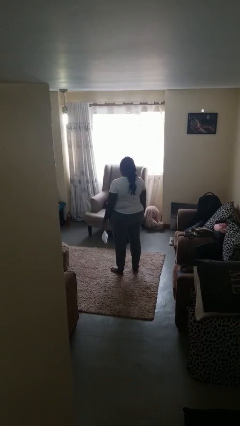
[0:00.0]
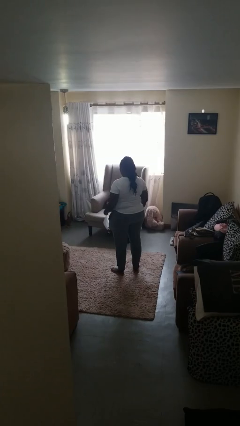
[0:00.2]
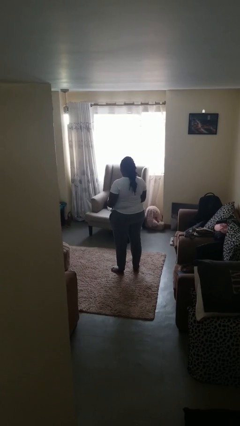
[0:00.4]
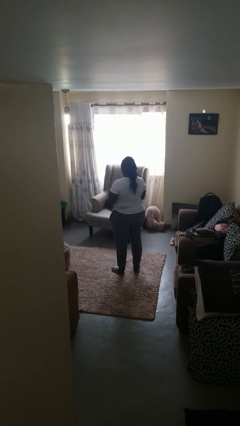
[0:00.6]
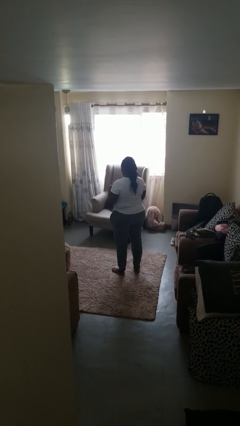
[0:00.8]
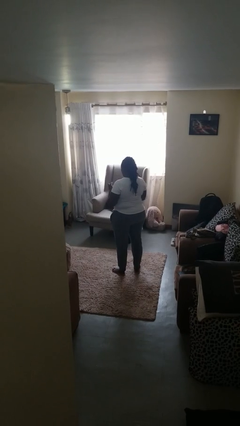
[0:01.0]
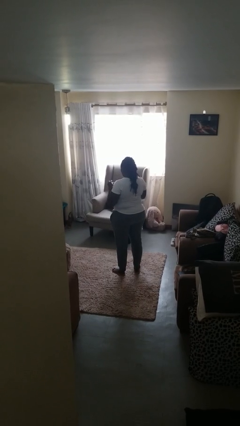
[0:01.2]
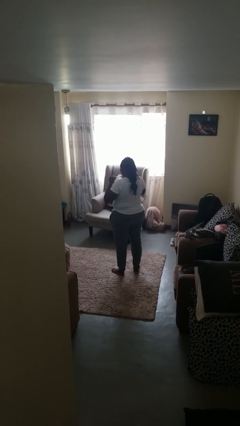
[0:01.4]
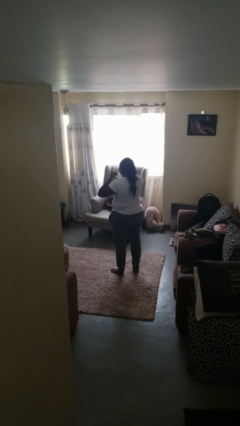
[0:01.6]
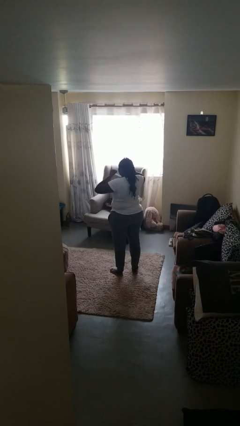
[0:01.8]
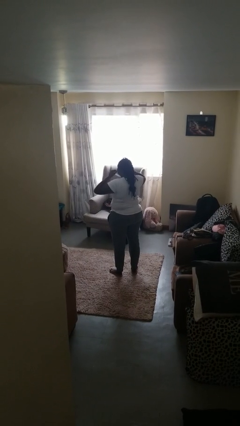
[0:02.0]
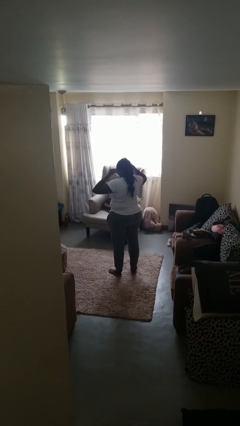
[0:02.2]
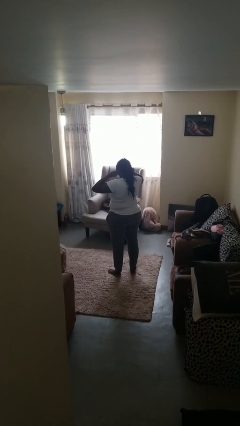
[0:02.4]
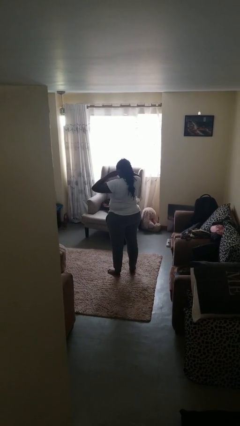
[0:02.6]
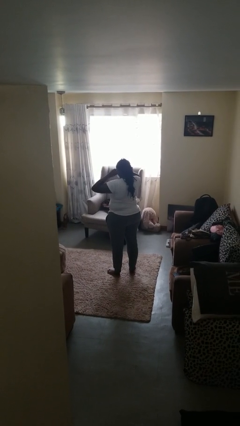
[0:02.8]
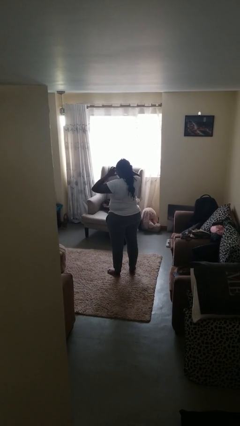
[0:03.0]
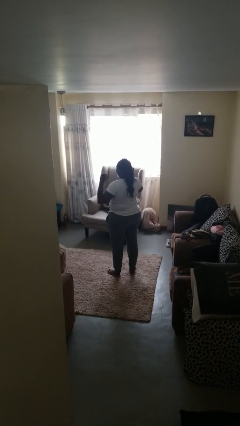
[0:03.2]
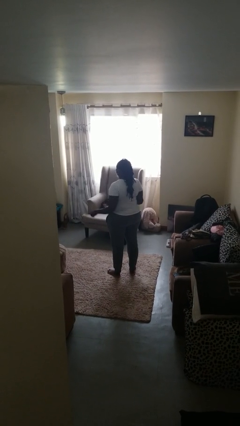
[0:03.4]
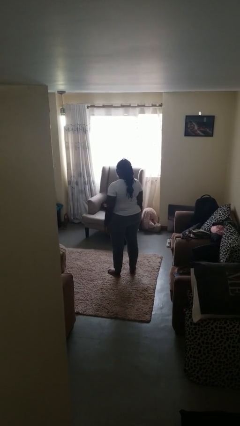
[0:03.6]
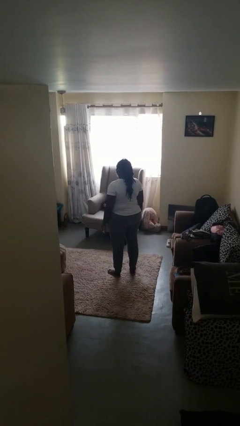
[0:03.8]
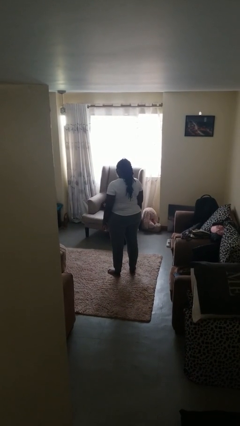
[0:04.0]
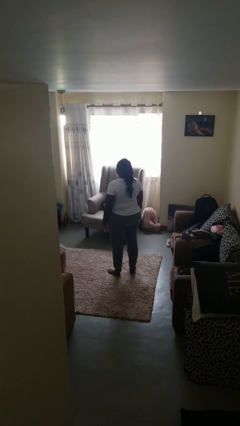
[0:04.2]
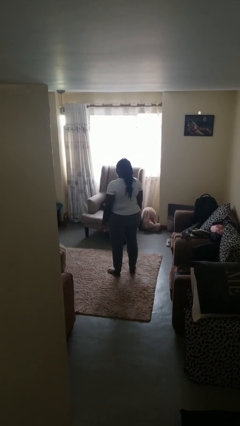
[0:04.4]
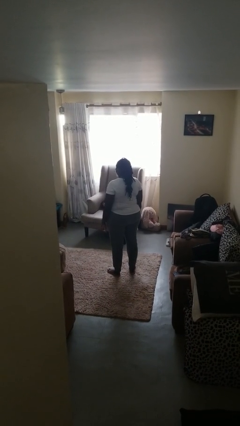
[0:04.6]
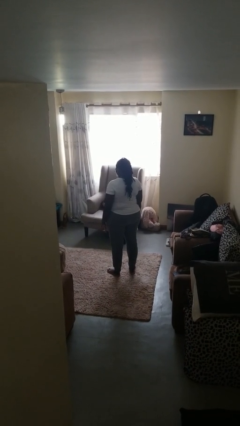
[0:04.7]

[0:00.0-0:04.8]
person puts on facemask

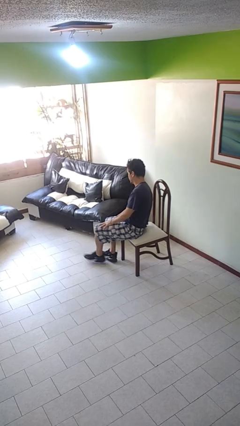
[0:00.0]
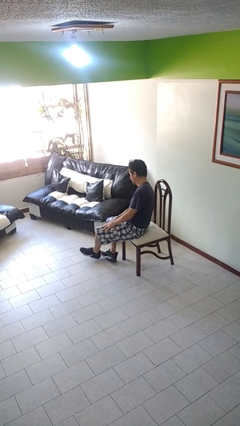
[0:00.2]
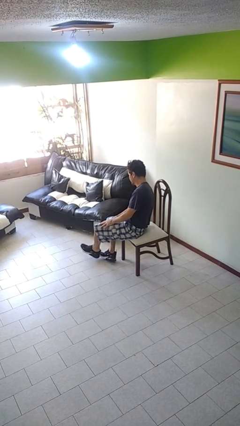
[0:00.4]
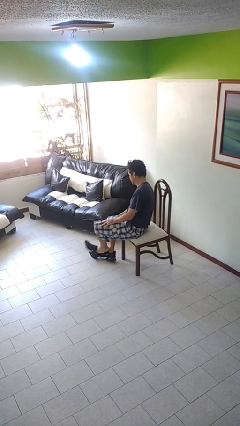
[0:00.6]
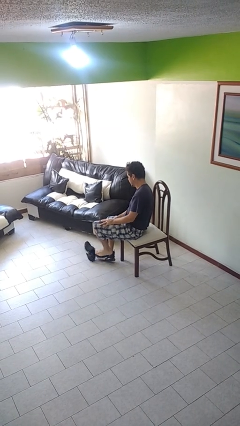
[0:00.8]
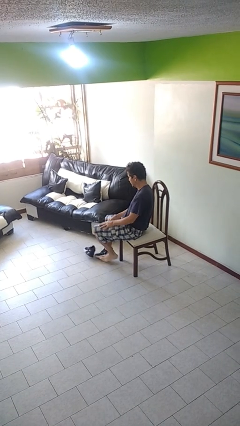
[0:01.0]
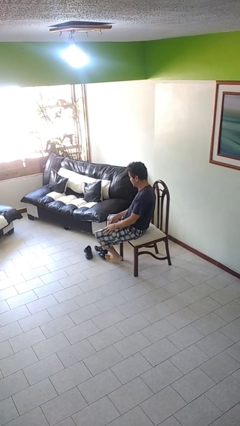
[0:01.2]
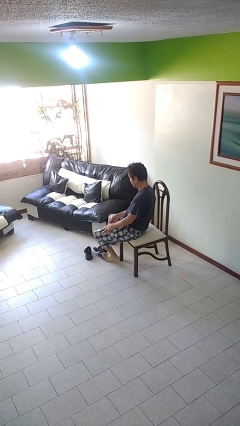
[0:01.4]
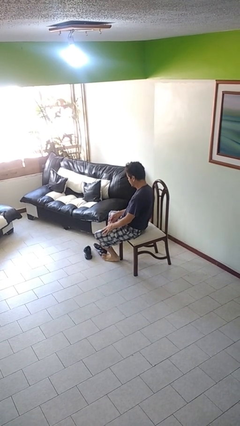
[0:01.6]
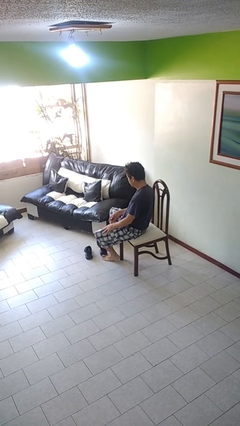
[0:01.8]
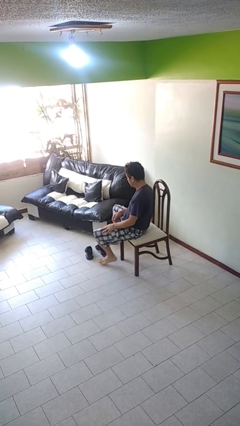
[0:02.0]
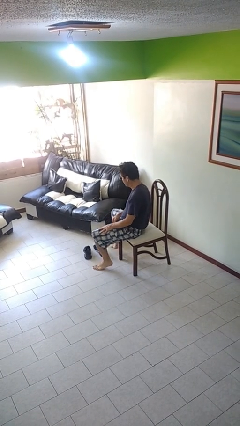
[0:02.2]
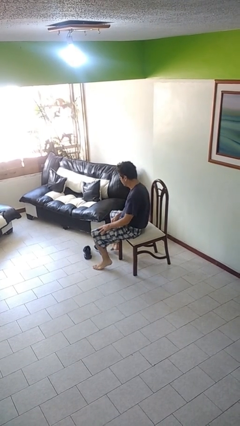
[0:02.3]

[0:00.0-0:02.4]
person takes off shoes

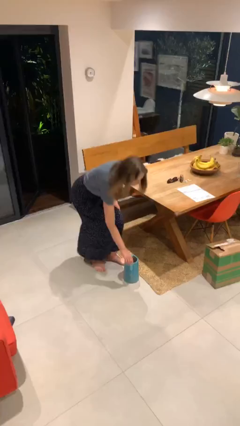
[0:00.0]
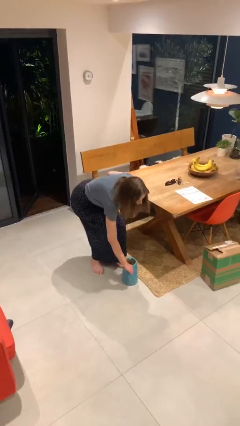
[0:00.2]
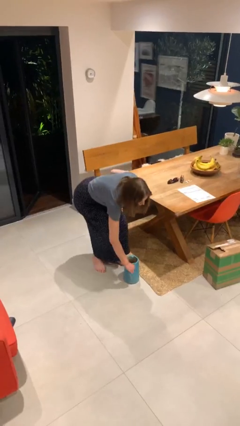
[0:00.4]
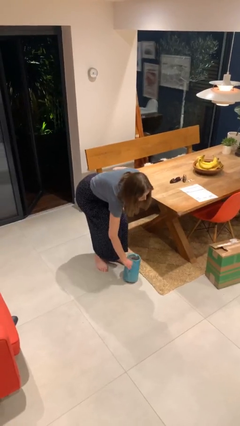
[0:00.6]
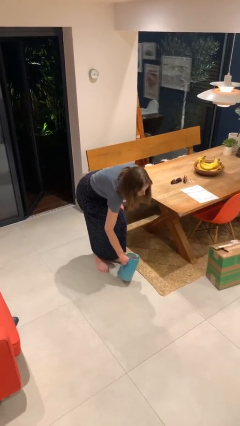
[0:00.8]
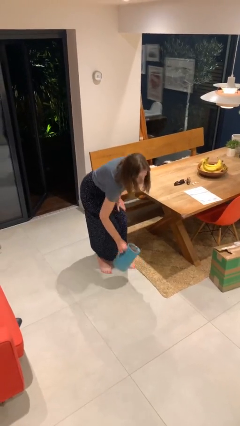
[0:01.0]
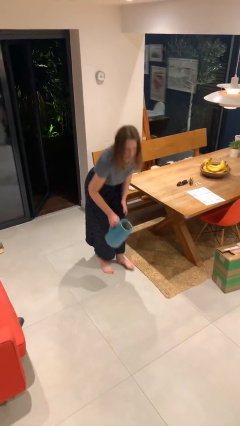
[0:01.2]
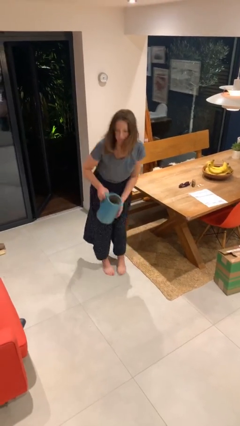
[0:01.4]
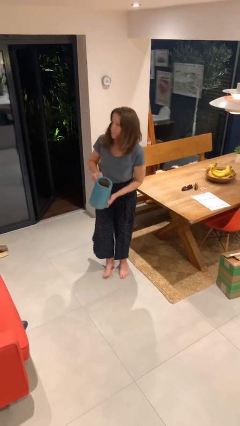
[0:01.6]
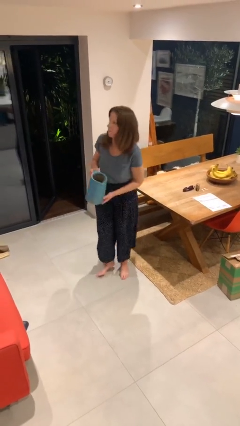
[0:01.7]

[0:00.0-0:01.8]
person picks up object from floor

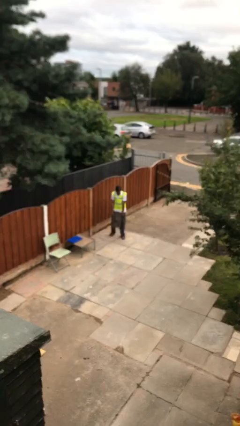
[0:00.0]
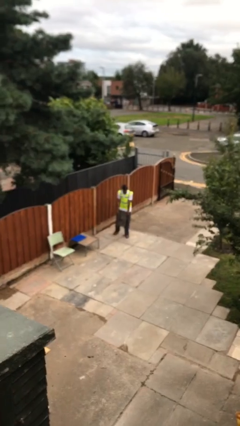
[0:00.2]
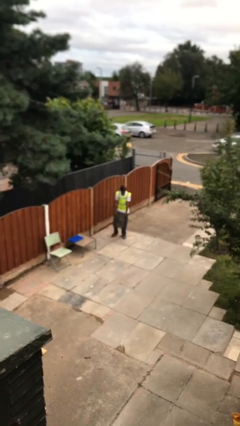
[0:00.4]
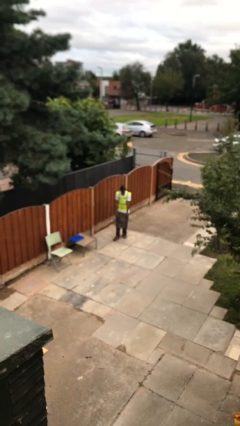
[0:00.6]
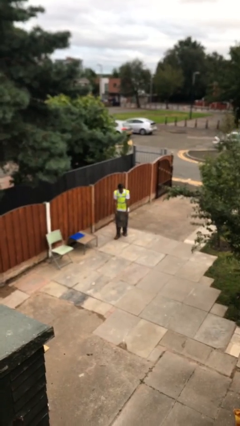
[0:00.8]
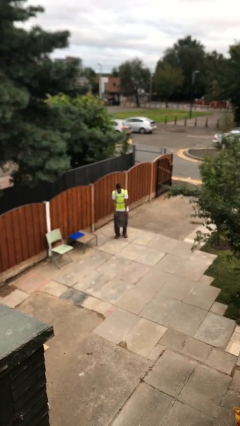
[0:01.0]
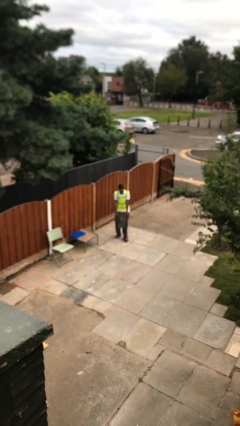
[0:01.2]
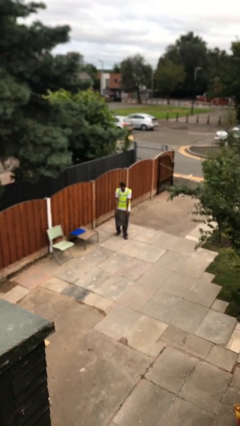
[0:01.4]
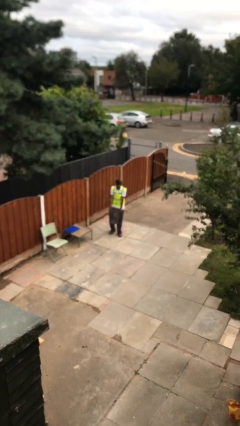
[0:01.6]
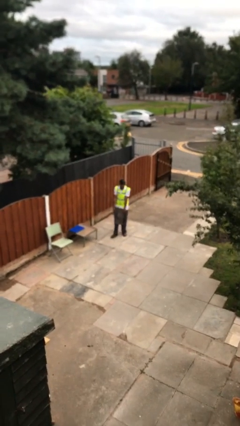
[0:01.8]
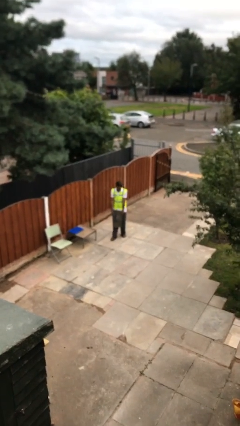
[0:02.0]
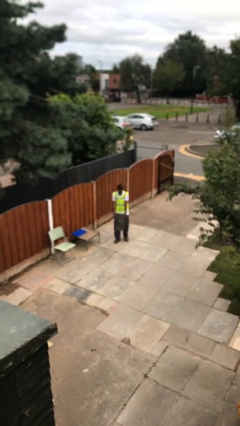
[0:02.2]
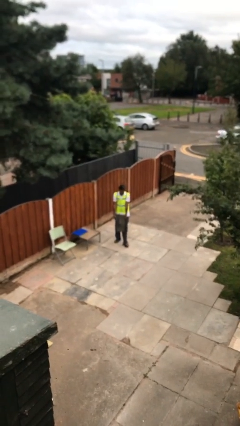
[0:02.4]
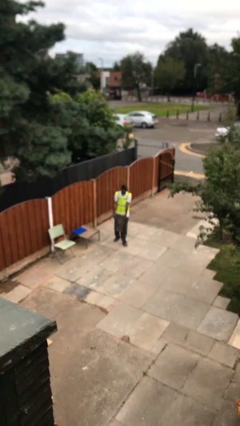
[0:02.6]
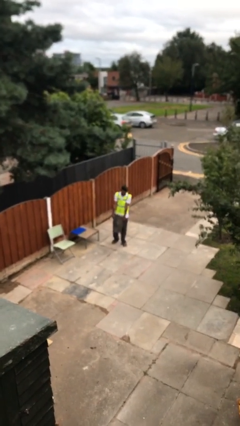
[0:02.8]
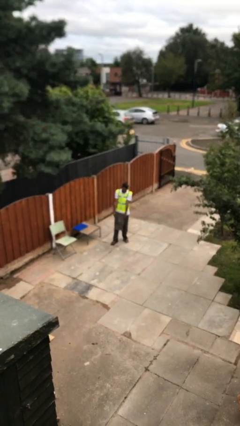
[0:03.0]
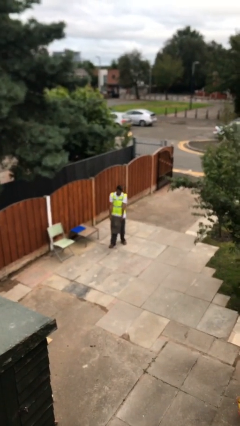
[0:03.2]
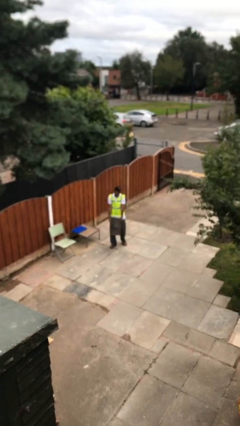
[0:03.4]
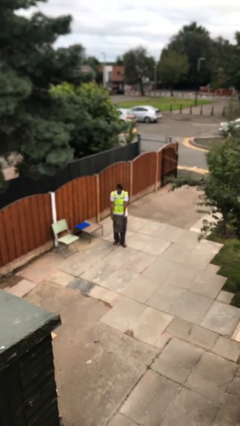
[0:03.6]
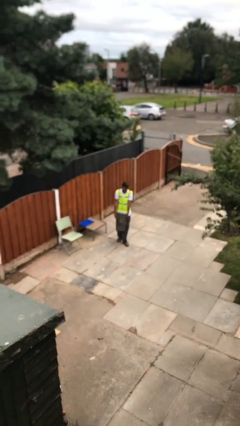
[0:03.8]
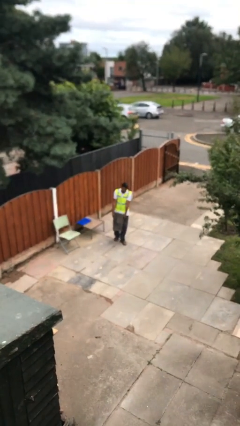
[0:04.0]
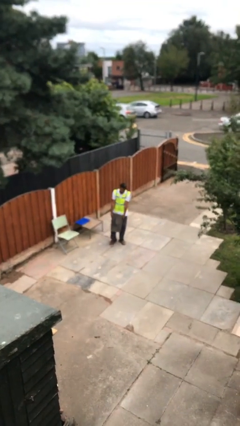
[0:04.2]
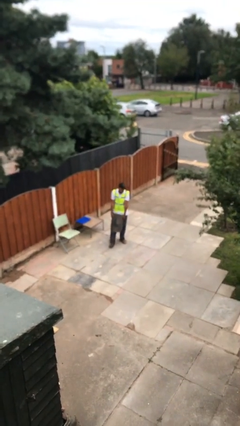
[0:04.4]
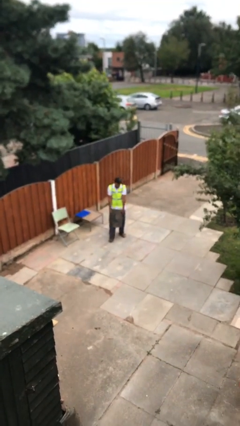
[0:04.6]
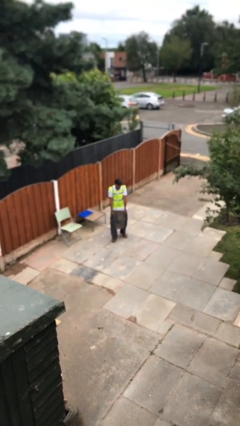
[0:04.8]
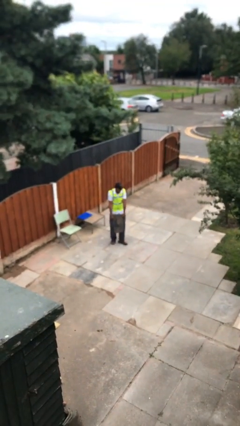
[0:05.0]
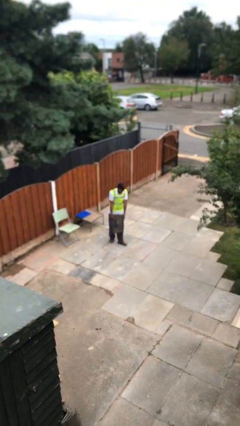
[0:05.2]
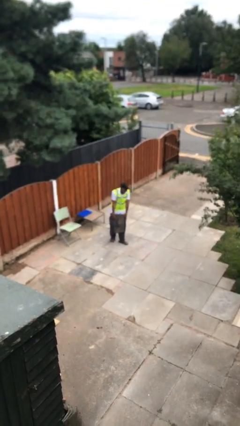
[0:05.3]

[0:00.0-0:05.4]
person carries heavy object

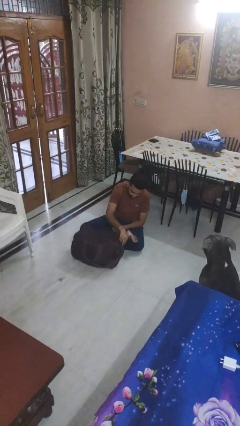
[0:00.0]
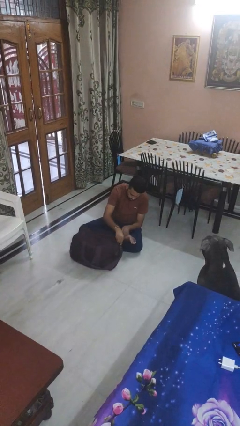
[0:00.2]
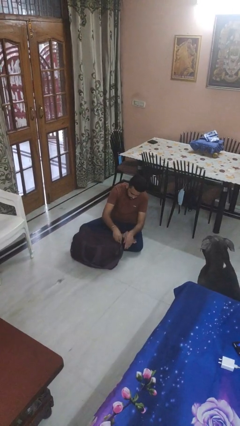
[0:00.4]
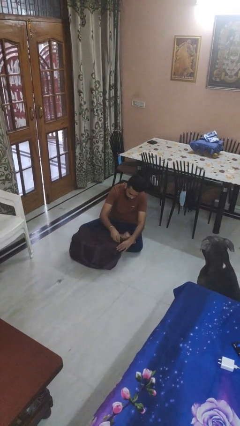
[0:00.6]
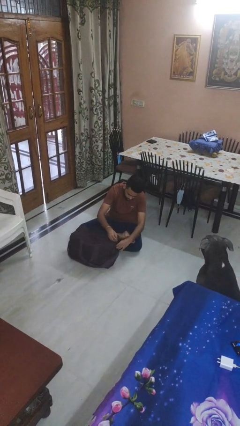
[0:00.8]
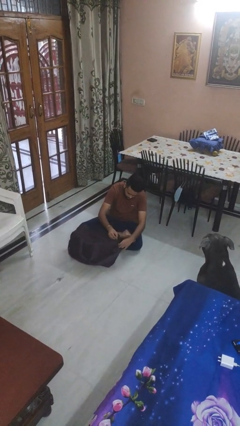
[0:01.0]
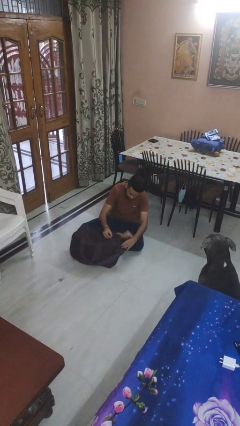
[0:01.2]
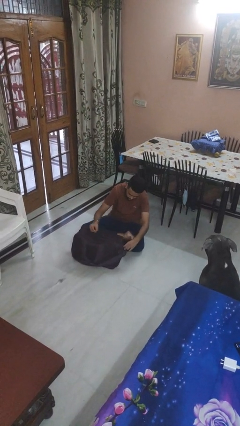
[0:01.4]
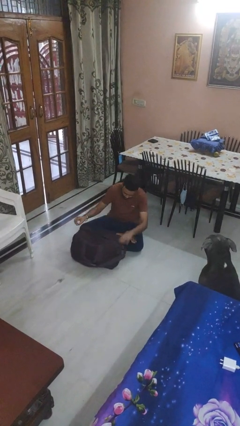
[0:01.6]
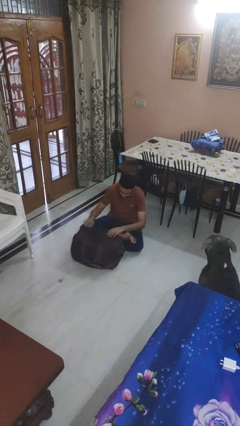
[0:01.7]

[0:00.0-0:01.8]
person opens suitcase

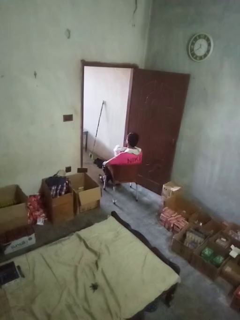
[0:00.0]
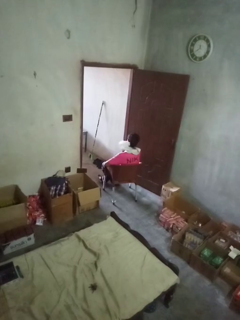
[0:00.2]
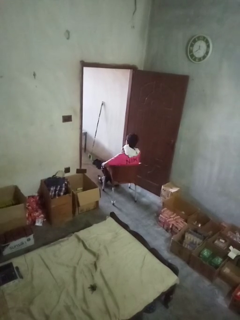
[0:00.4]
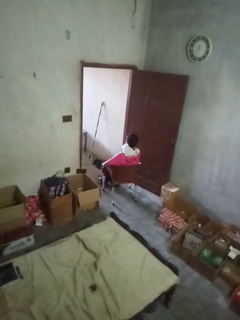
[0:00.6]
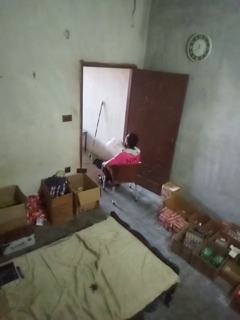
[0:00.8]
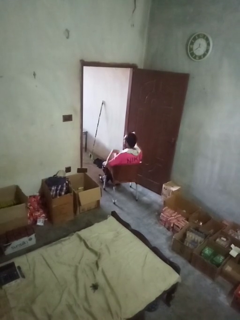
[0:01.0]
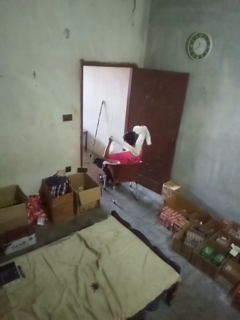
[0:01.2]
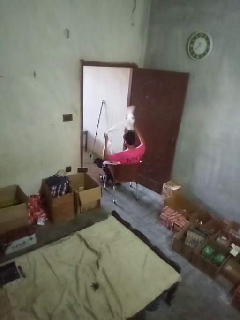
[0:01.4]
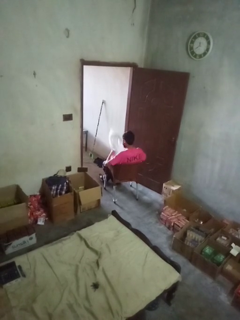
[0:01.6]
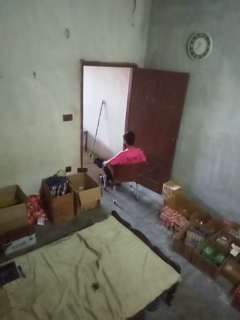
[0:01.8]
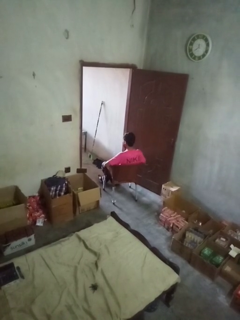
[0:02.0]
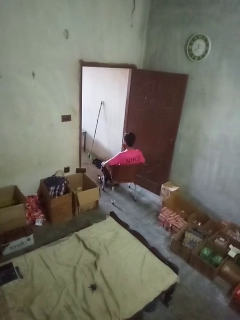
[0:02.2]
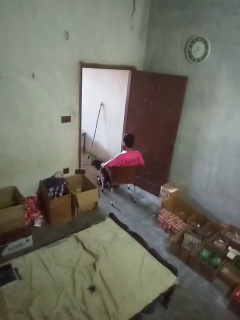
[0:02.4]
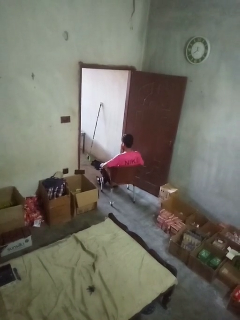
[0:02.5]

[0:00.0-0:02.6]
person takes off scarf
